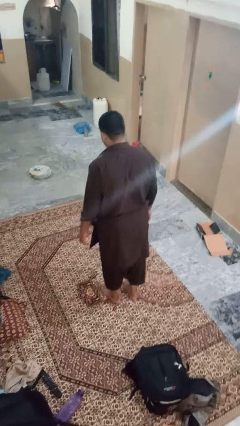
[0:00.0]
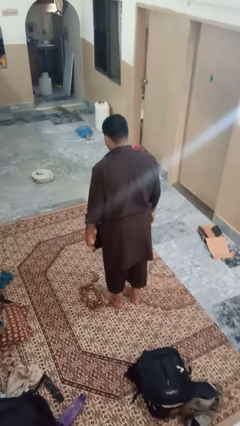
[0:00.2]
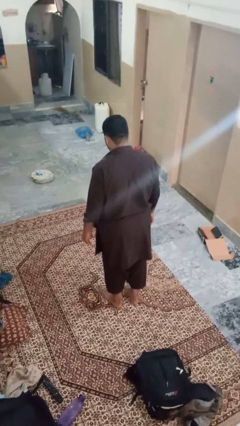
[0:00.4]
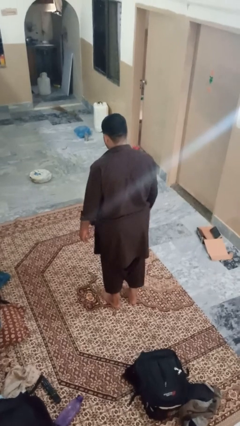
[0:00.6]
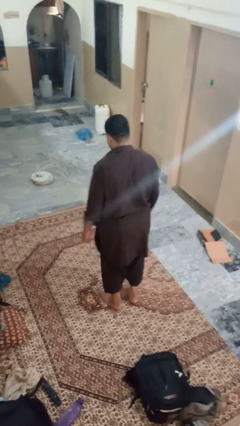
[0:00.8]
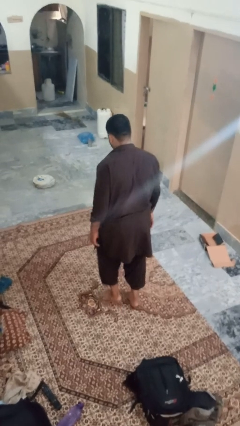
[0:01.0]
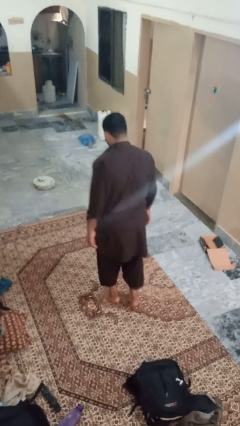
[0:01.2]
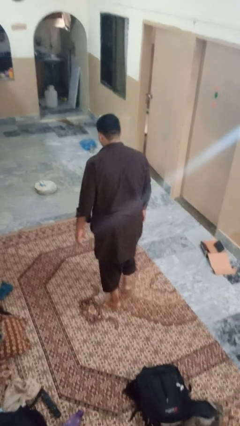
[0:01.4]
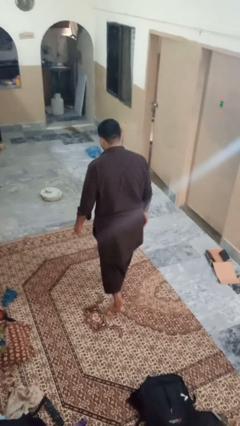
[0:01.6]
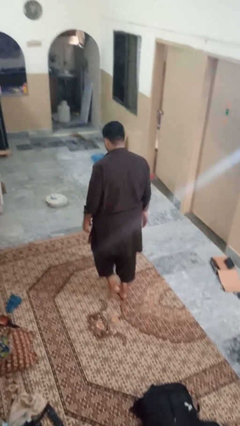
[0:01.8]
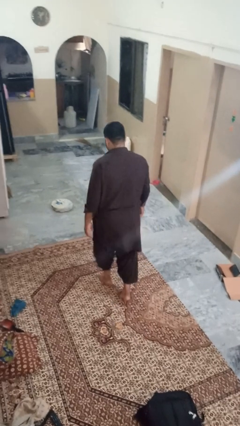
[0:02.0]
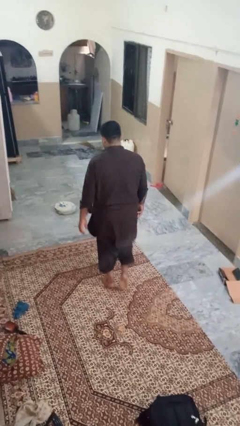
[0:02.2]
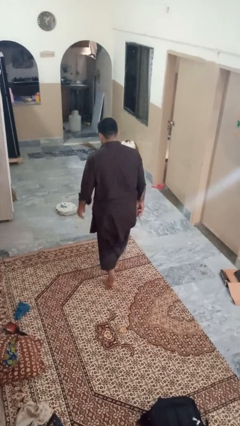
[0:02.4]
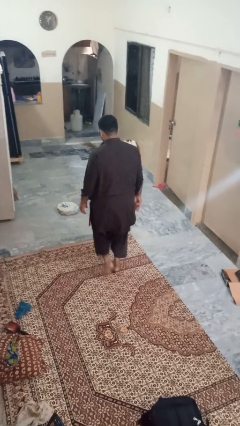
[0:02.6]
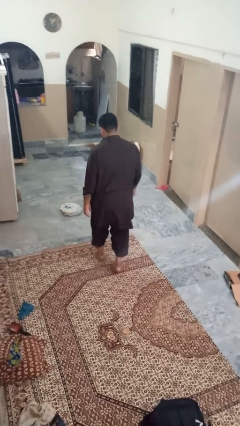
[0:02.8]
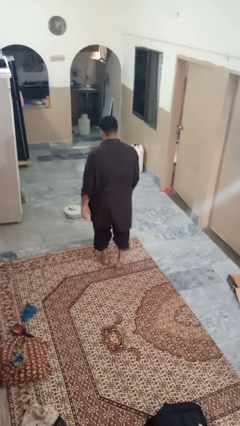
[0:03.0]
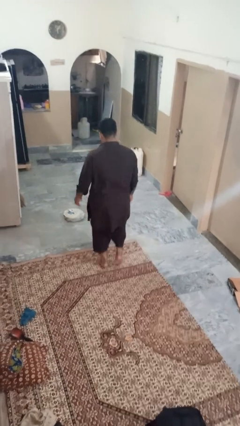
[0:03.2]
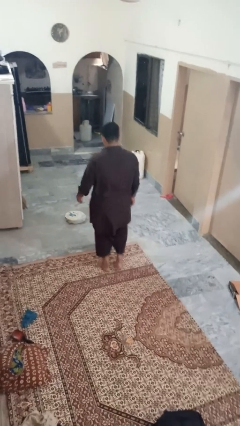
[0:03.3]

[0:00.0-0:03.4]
person walks tiptoe

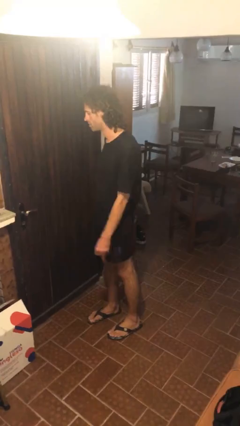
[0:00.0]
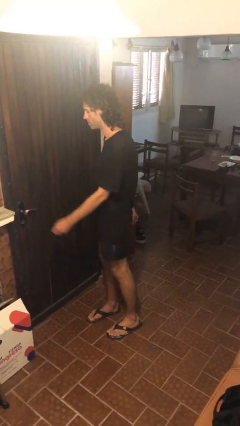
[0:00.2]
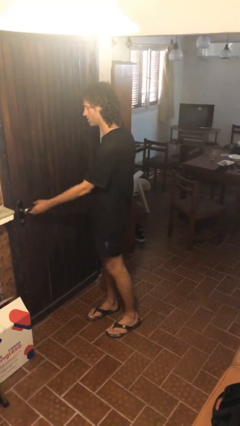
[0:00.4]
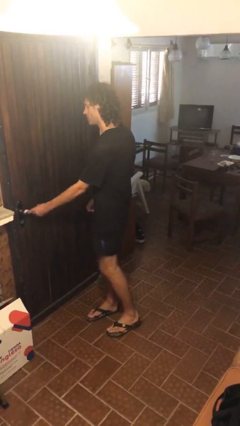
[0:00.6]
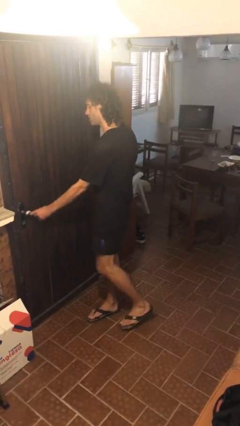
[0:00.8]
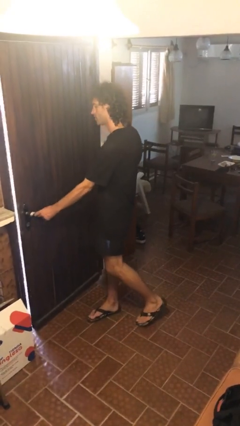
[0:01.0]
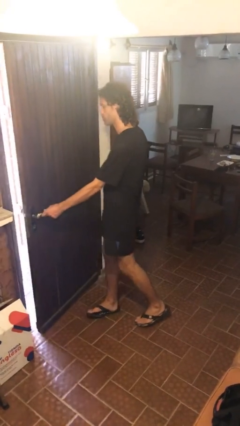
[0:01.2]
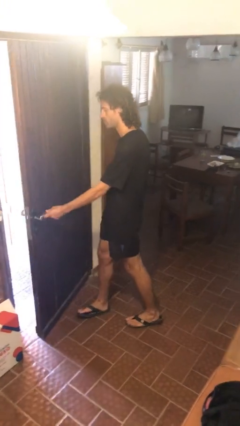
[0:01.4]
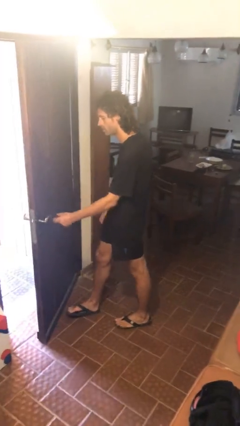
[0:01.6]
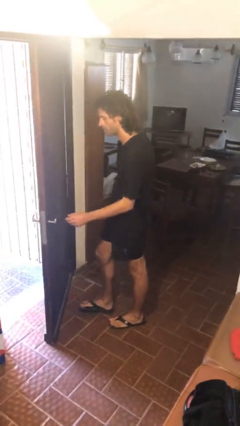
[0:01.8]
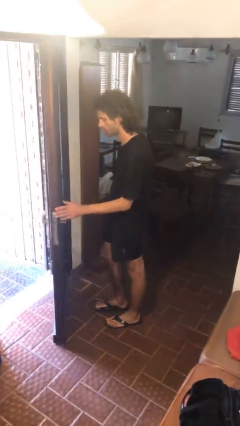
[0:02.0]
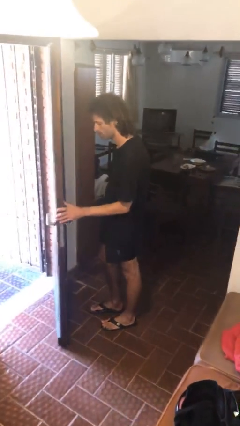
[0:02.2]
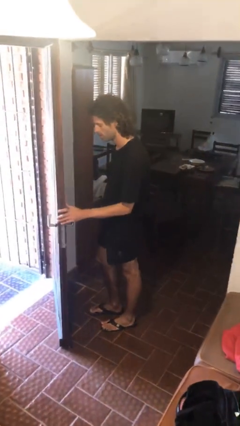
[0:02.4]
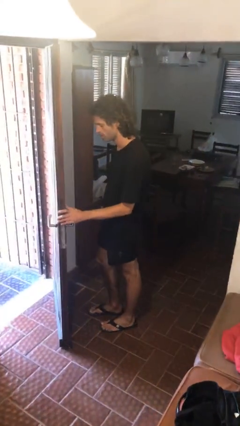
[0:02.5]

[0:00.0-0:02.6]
person opens facility door

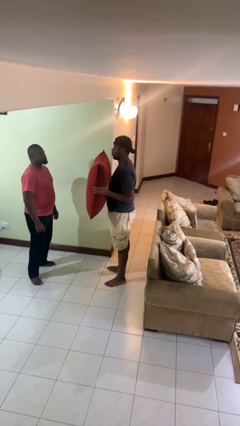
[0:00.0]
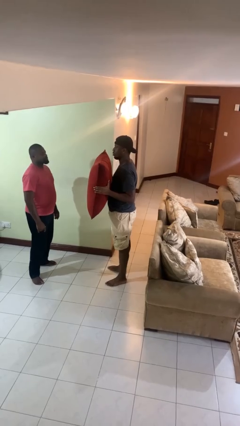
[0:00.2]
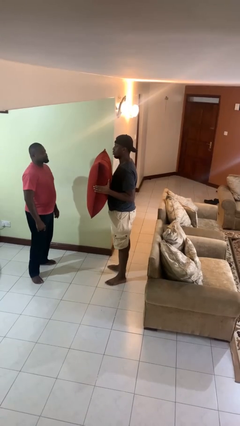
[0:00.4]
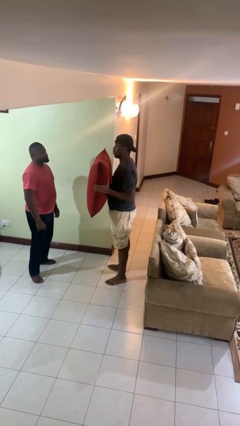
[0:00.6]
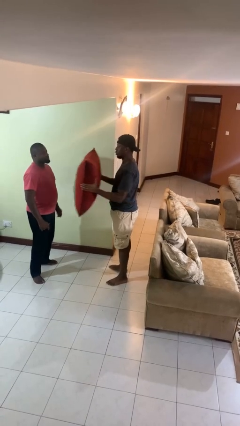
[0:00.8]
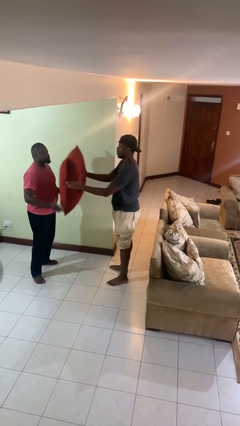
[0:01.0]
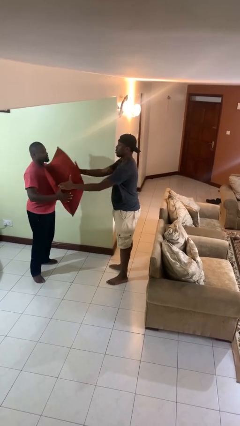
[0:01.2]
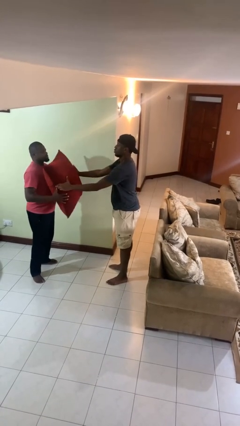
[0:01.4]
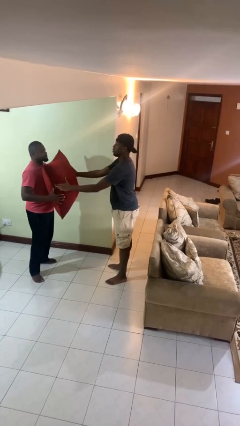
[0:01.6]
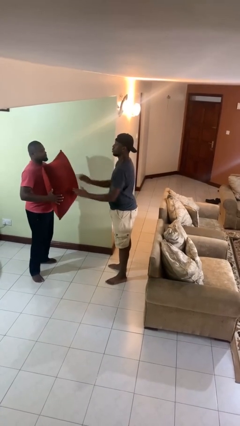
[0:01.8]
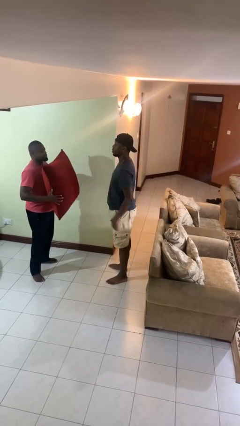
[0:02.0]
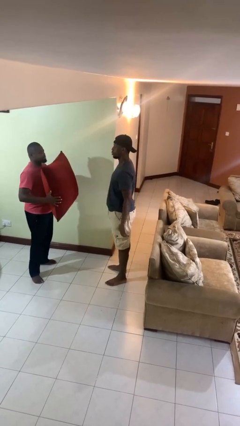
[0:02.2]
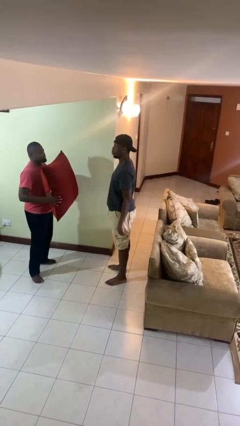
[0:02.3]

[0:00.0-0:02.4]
person transfers object to person

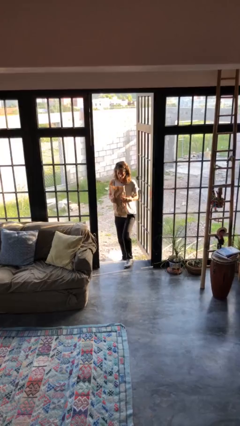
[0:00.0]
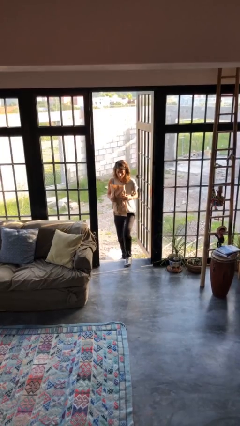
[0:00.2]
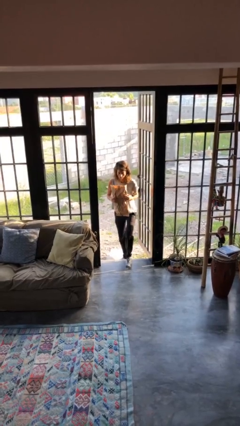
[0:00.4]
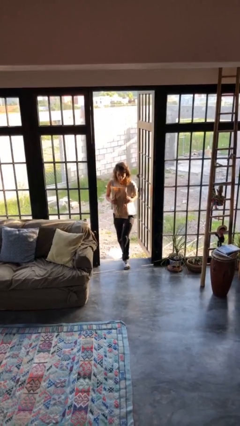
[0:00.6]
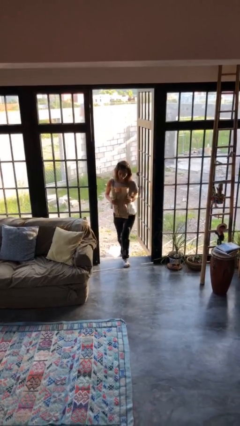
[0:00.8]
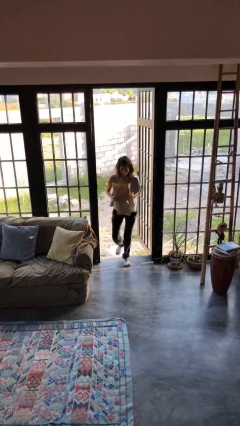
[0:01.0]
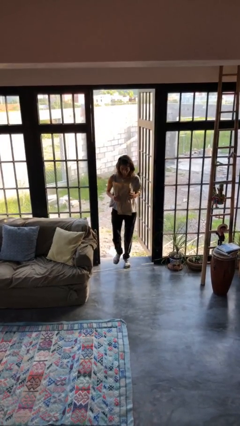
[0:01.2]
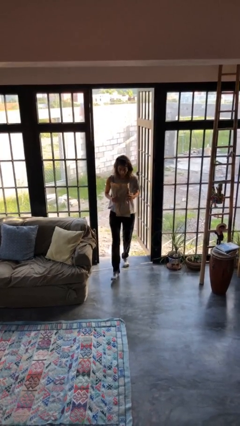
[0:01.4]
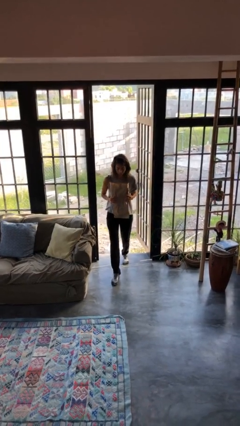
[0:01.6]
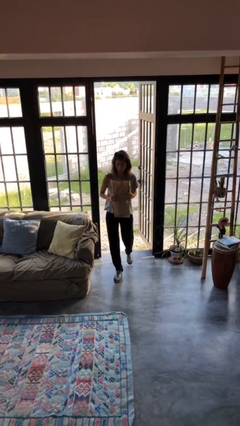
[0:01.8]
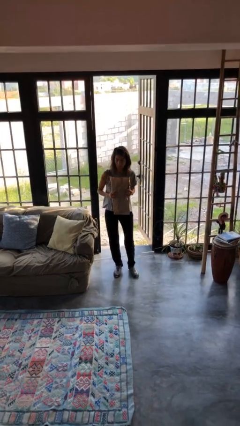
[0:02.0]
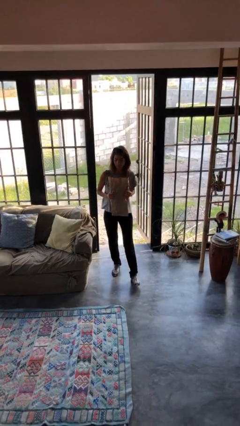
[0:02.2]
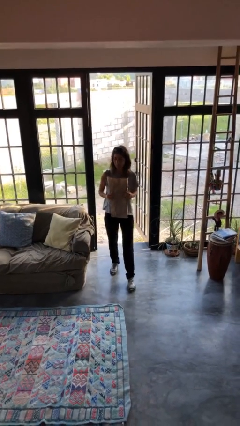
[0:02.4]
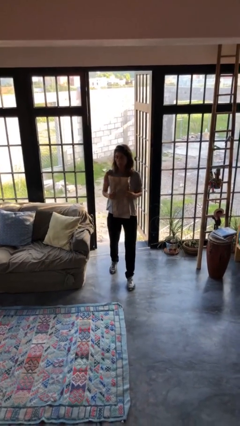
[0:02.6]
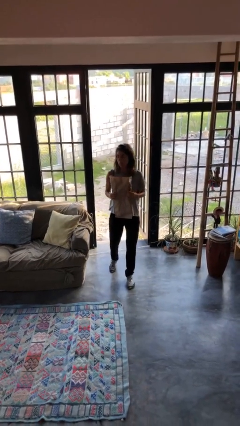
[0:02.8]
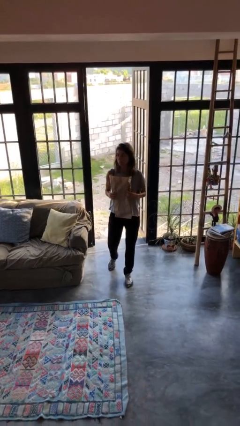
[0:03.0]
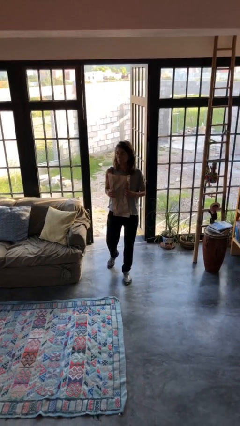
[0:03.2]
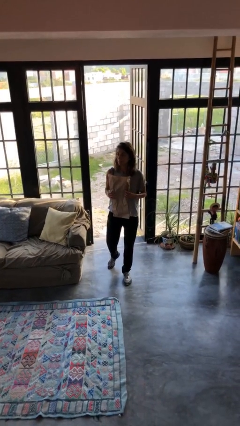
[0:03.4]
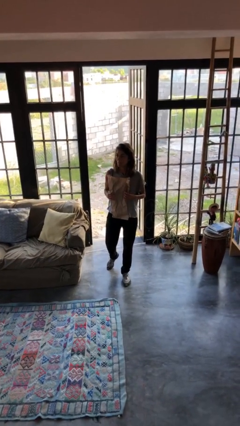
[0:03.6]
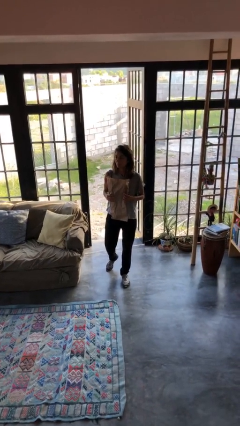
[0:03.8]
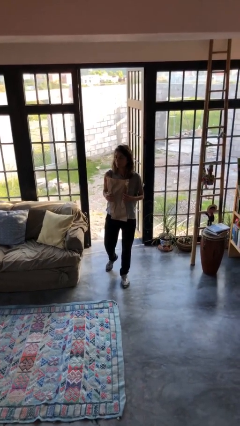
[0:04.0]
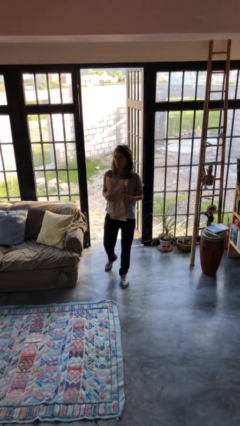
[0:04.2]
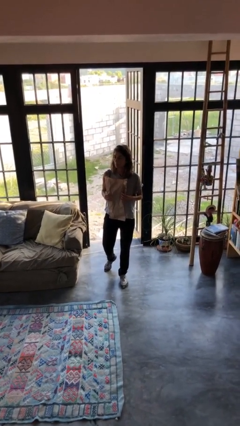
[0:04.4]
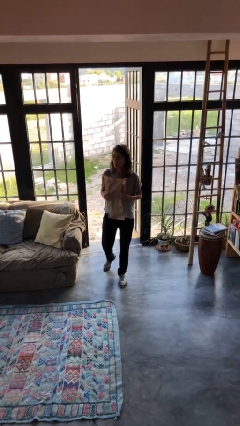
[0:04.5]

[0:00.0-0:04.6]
person carries groceries

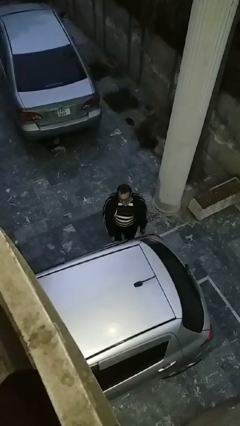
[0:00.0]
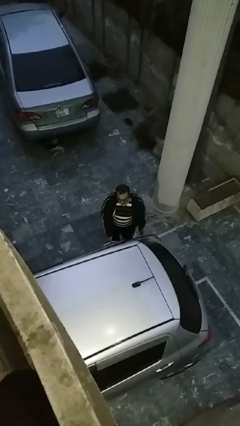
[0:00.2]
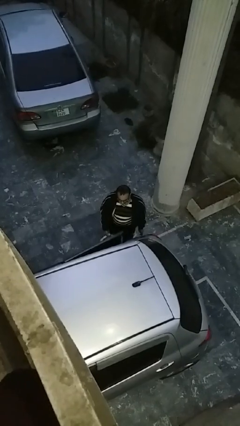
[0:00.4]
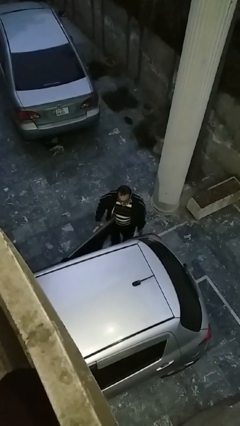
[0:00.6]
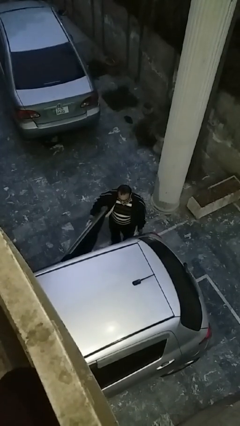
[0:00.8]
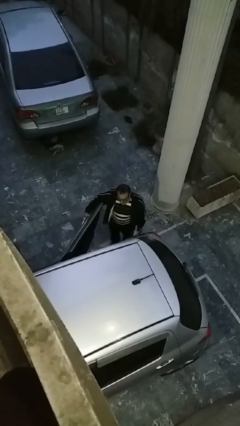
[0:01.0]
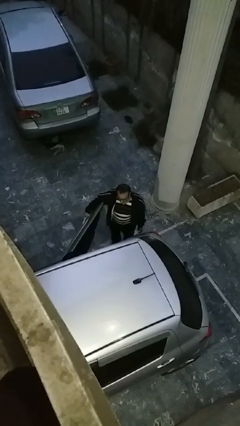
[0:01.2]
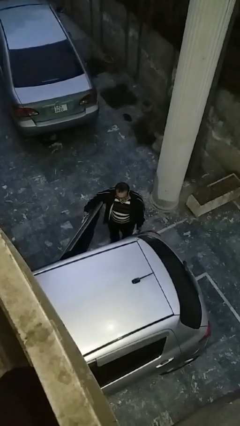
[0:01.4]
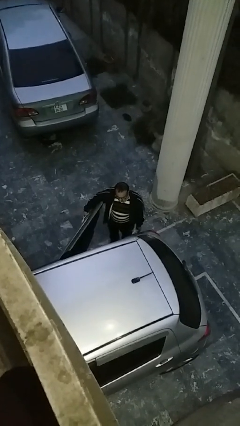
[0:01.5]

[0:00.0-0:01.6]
person opens car door

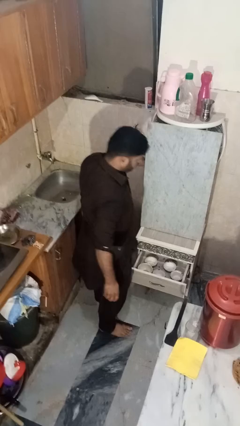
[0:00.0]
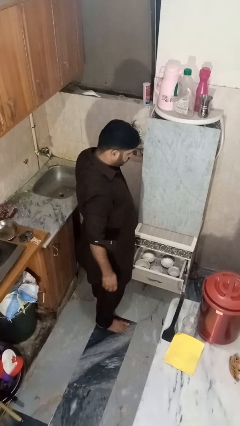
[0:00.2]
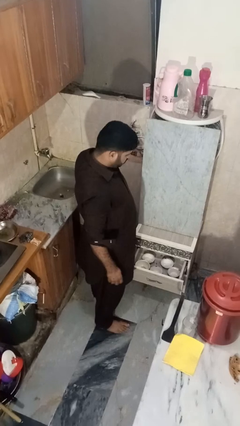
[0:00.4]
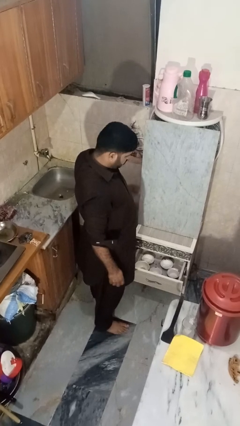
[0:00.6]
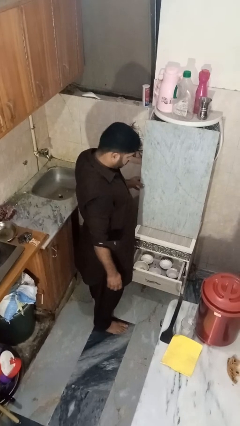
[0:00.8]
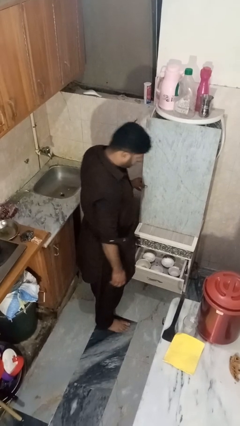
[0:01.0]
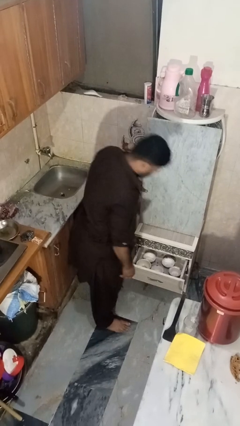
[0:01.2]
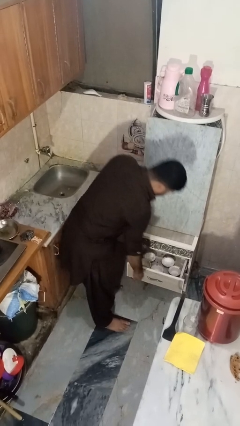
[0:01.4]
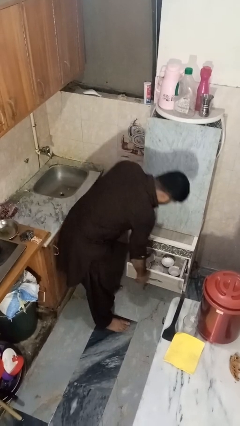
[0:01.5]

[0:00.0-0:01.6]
person closes kitchen drawer

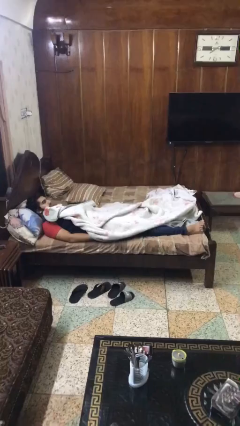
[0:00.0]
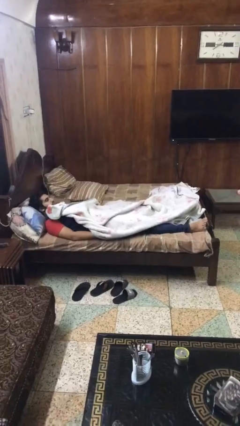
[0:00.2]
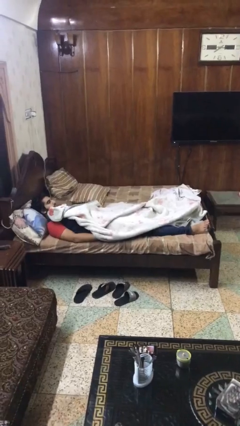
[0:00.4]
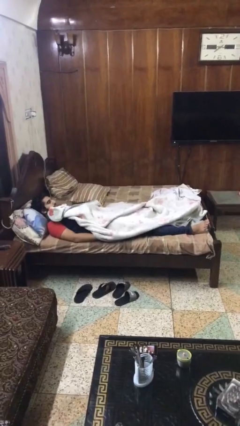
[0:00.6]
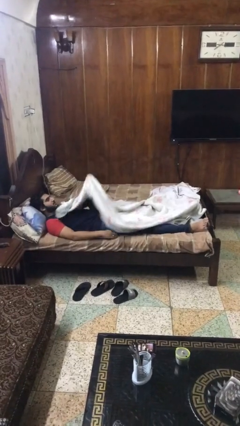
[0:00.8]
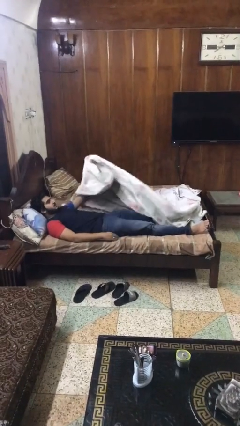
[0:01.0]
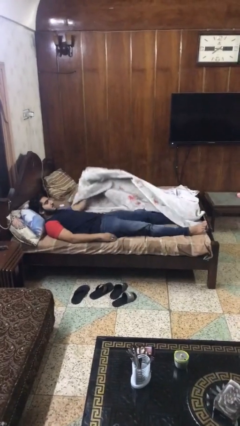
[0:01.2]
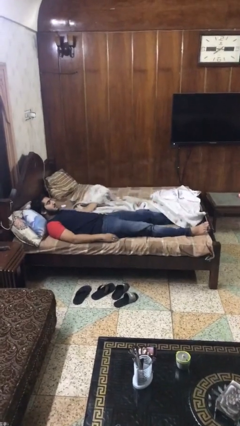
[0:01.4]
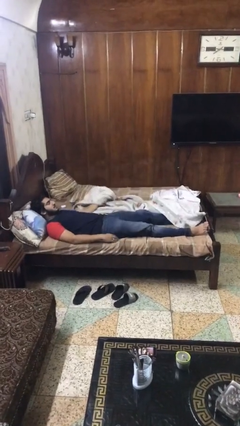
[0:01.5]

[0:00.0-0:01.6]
person uncovers with blanket
